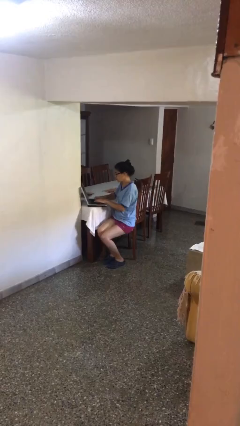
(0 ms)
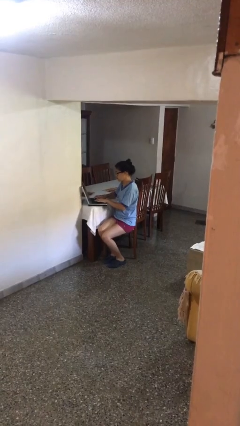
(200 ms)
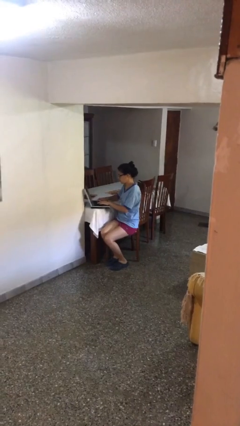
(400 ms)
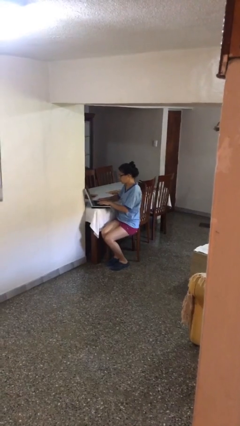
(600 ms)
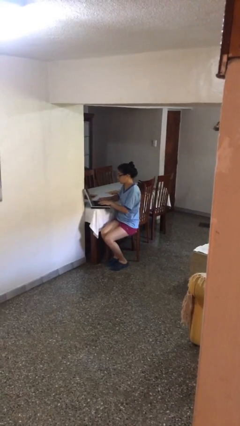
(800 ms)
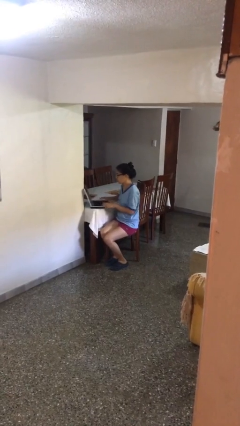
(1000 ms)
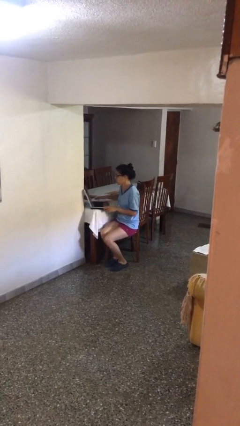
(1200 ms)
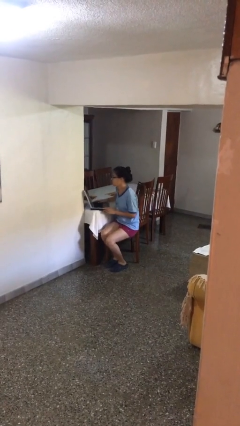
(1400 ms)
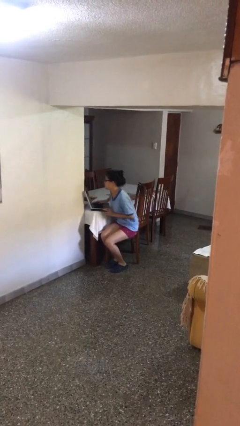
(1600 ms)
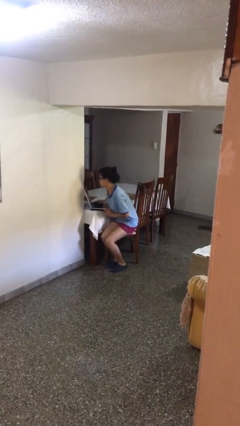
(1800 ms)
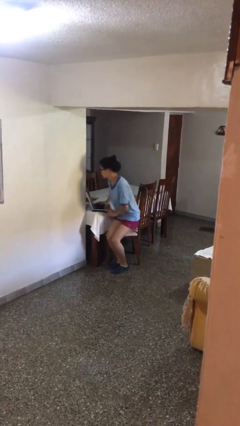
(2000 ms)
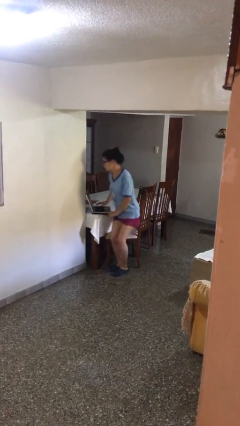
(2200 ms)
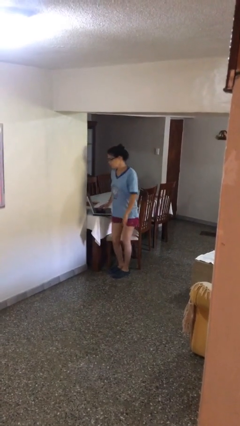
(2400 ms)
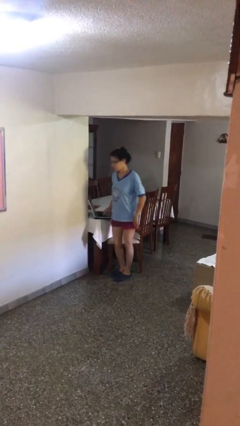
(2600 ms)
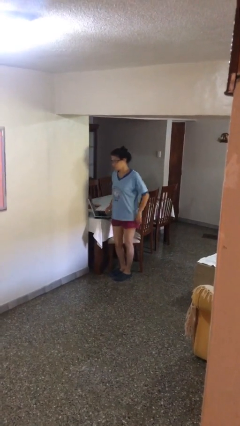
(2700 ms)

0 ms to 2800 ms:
person stands up

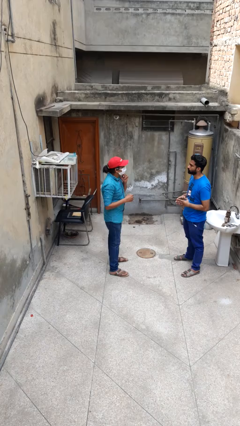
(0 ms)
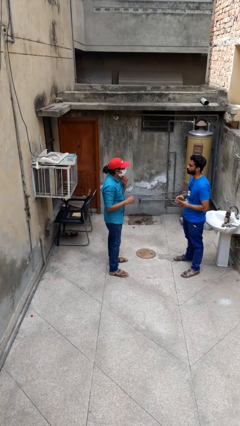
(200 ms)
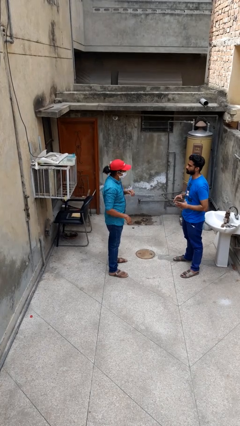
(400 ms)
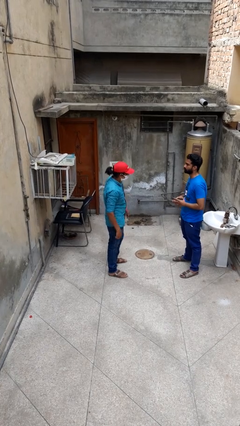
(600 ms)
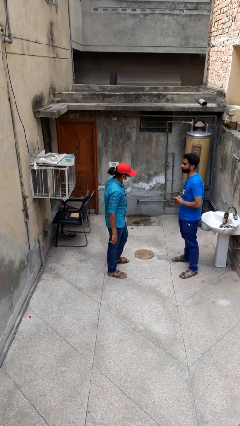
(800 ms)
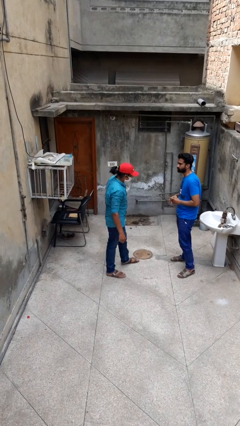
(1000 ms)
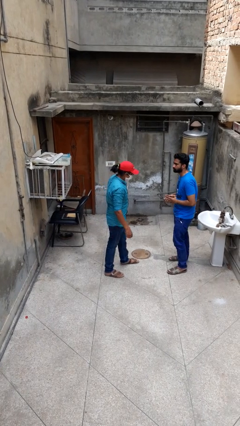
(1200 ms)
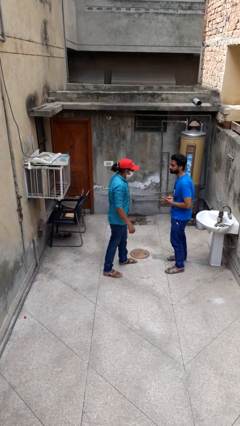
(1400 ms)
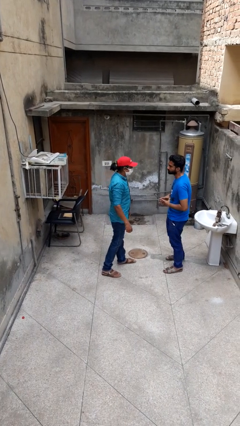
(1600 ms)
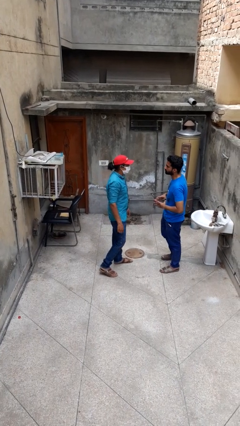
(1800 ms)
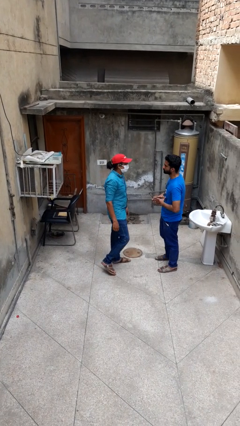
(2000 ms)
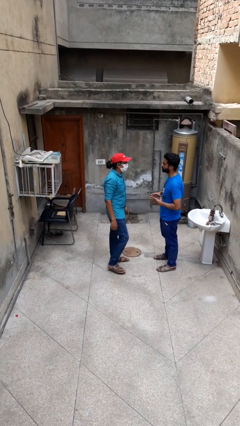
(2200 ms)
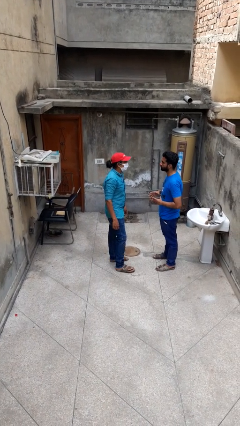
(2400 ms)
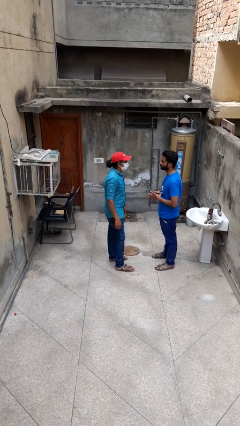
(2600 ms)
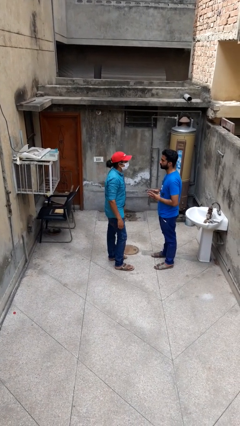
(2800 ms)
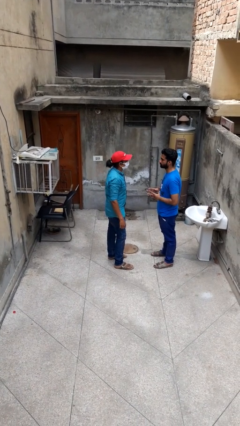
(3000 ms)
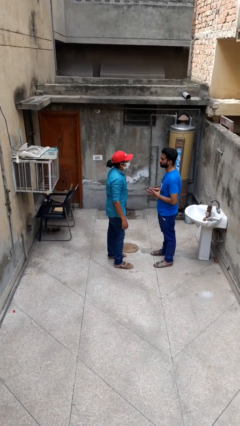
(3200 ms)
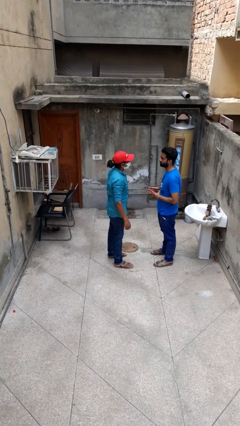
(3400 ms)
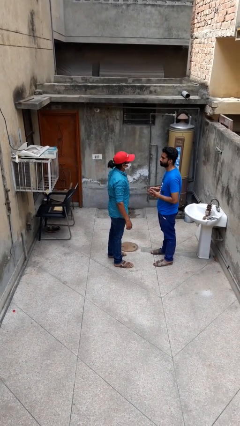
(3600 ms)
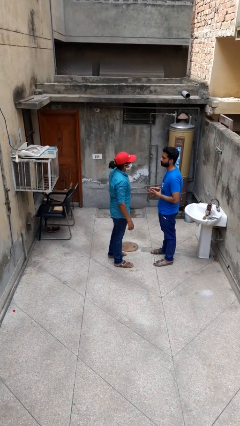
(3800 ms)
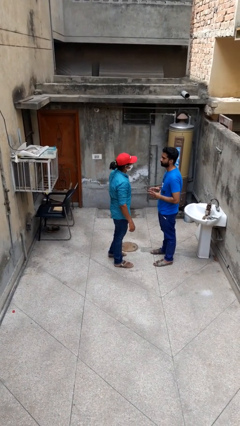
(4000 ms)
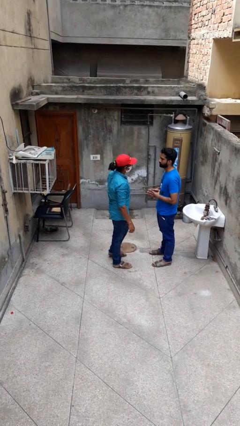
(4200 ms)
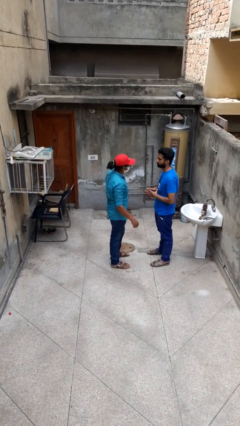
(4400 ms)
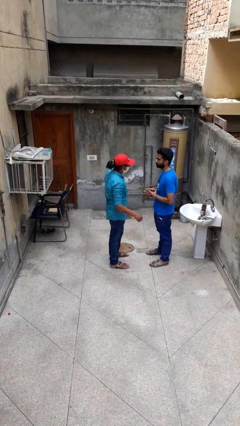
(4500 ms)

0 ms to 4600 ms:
person highfives hand

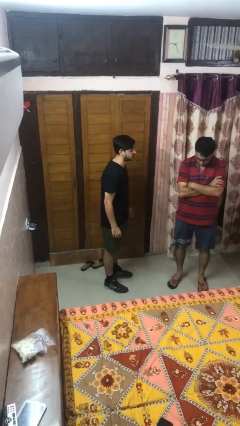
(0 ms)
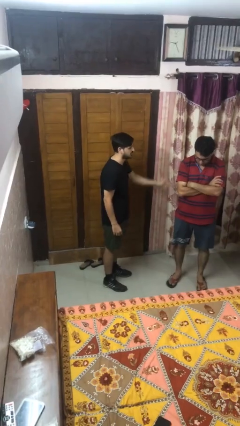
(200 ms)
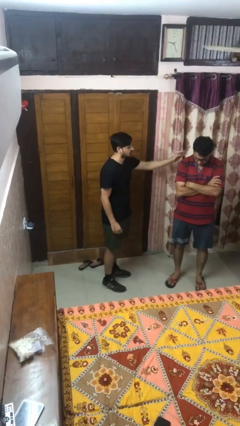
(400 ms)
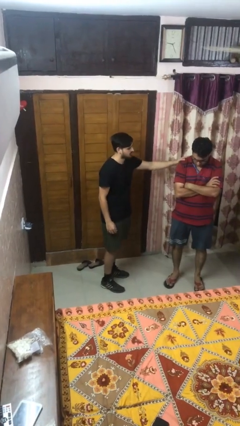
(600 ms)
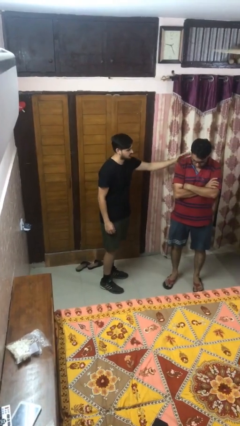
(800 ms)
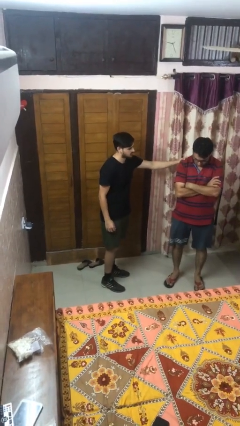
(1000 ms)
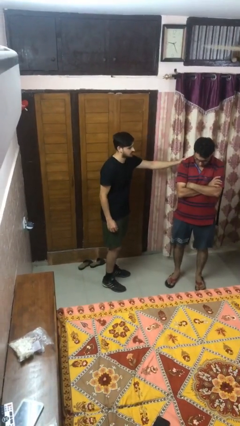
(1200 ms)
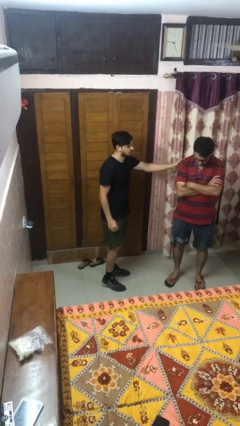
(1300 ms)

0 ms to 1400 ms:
person pounds shoulders of person

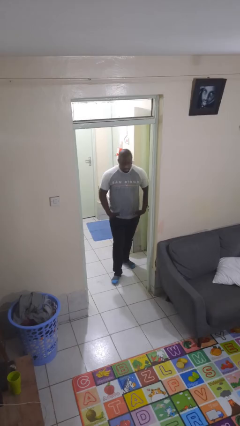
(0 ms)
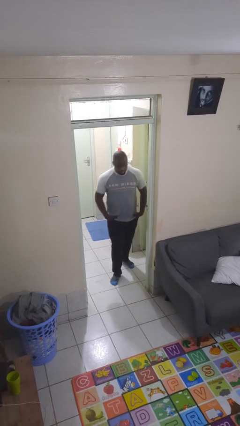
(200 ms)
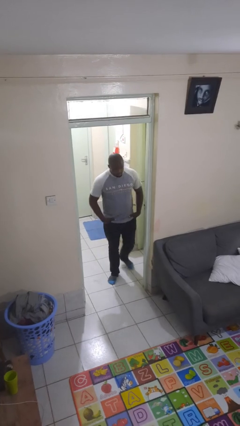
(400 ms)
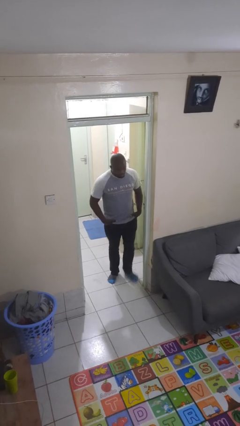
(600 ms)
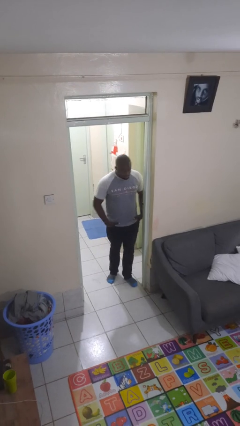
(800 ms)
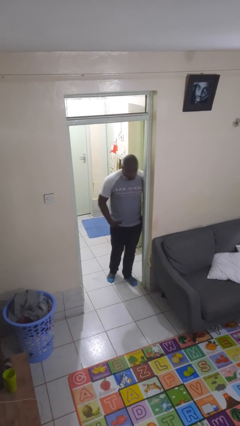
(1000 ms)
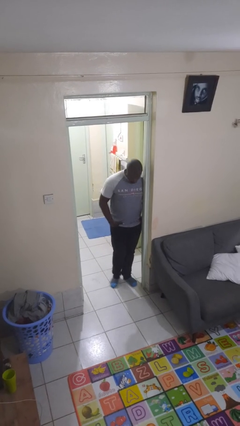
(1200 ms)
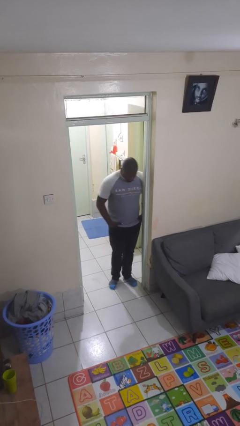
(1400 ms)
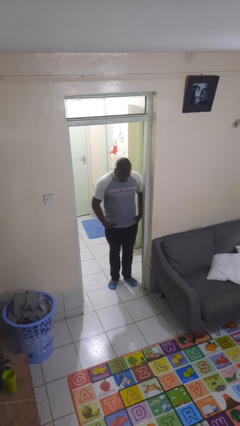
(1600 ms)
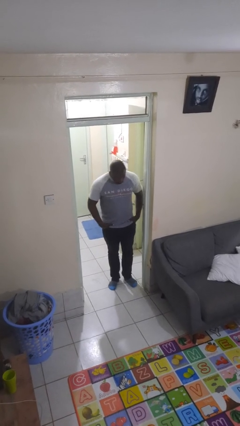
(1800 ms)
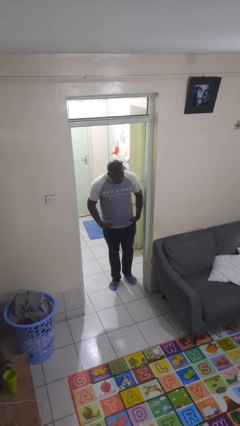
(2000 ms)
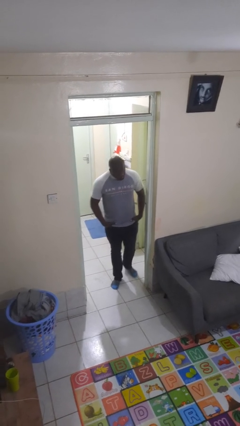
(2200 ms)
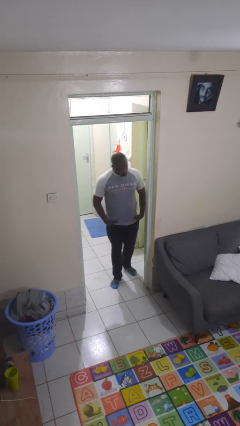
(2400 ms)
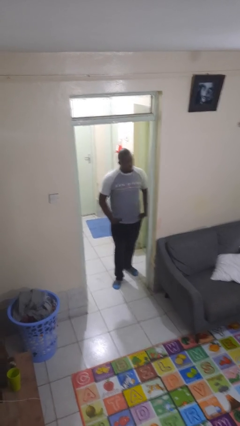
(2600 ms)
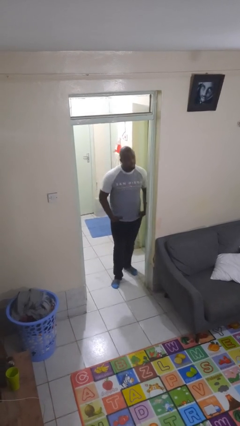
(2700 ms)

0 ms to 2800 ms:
person bumps into wall

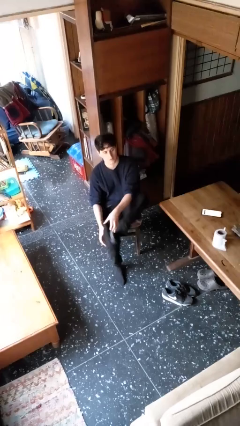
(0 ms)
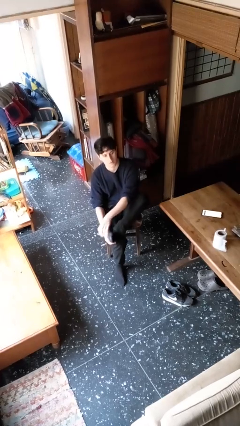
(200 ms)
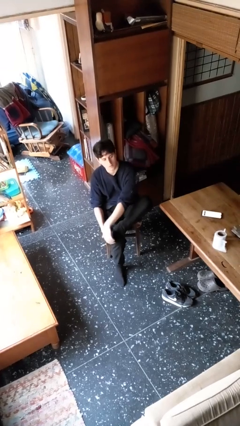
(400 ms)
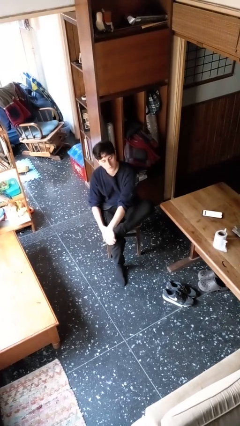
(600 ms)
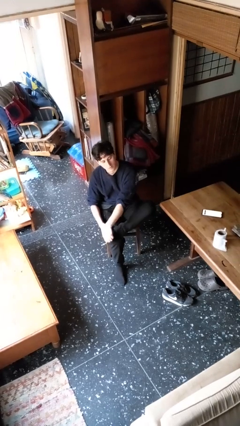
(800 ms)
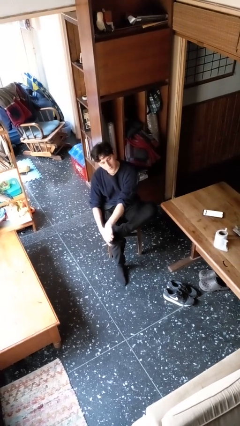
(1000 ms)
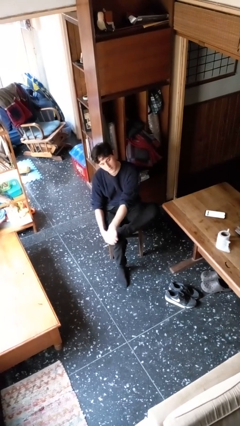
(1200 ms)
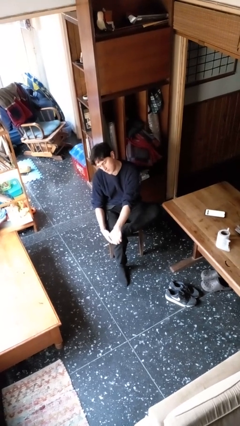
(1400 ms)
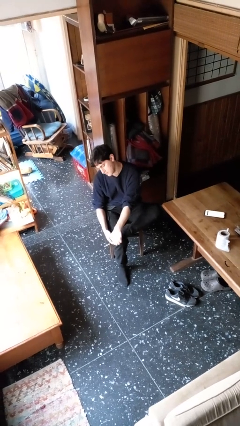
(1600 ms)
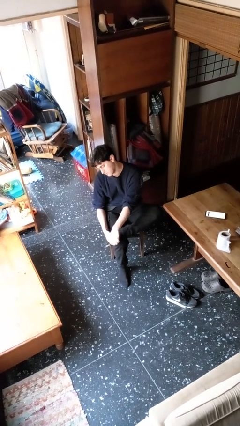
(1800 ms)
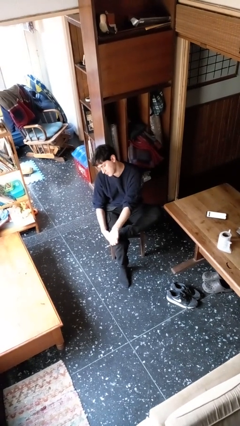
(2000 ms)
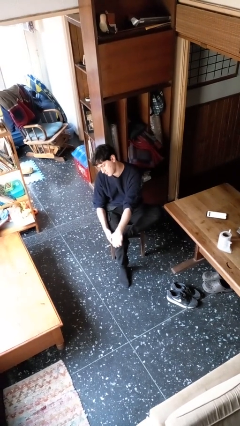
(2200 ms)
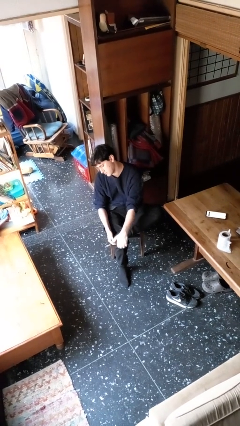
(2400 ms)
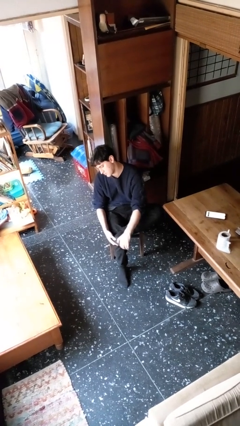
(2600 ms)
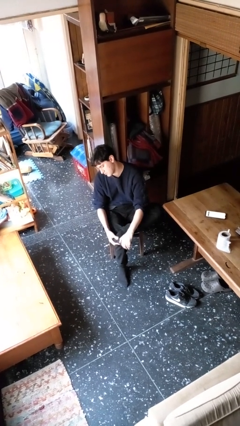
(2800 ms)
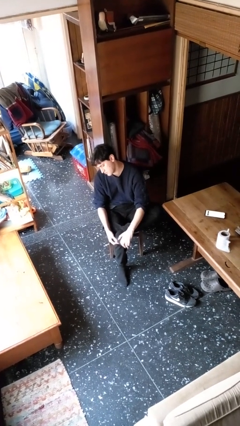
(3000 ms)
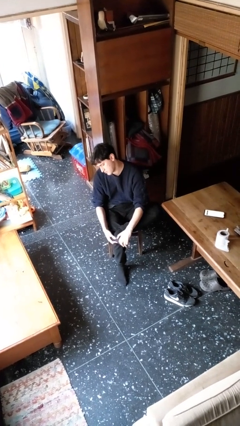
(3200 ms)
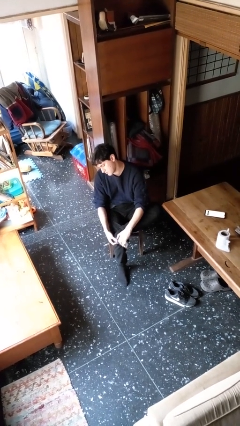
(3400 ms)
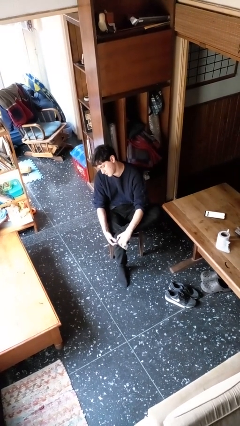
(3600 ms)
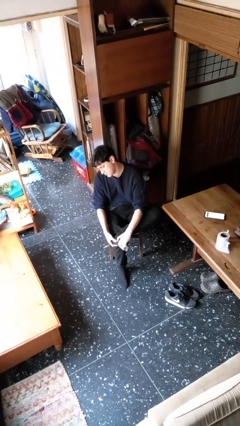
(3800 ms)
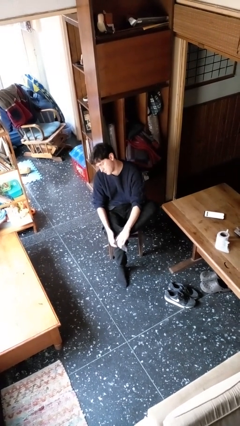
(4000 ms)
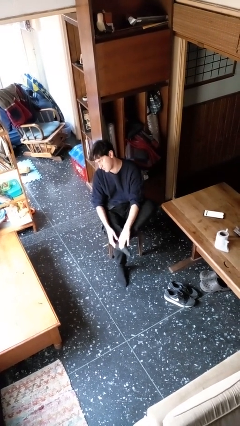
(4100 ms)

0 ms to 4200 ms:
person rubs foot

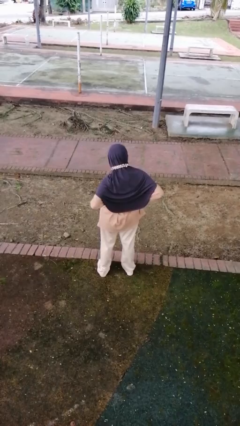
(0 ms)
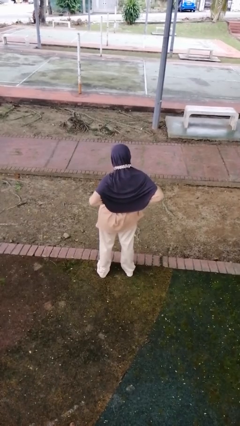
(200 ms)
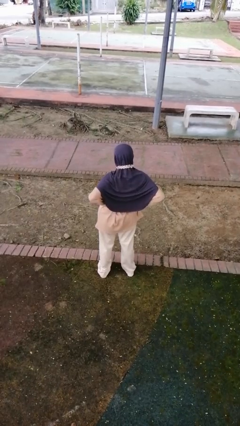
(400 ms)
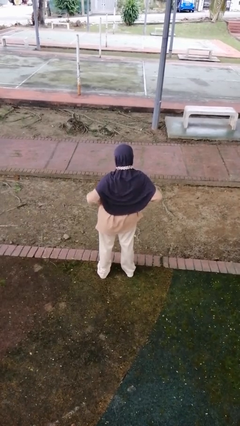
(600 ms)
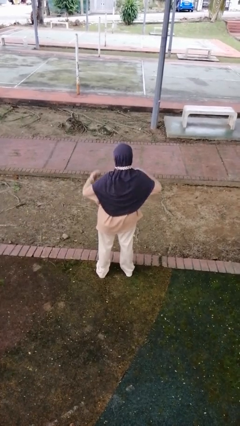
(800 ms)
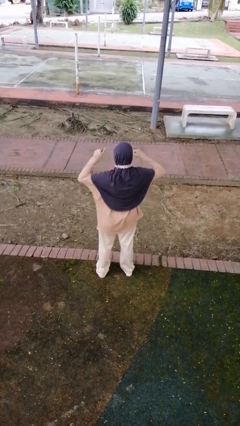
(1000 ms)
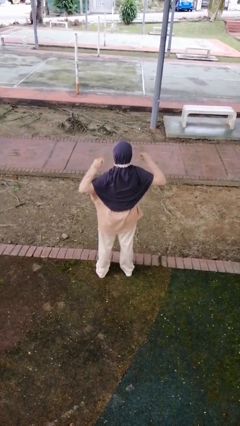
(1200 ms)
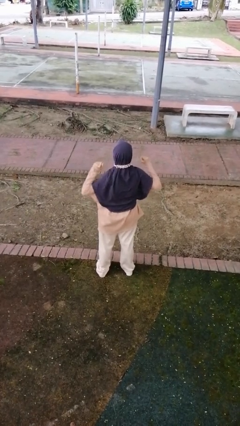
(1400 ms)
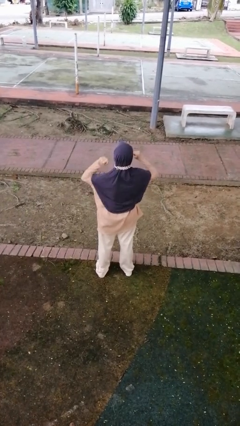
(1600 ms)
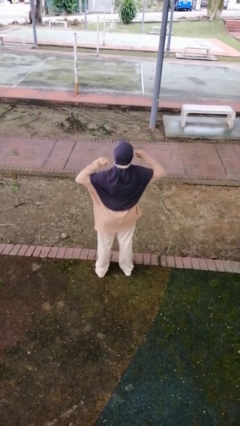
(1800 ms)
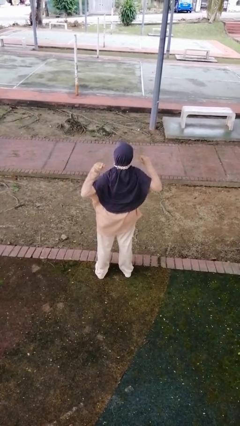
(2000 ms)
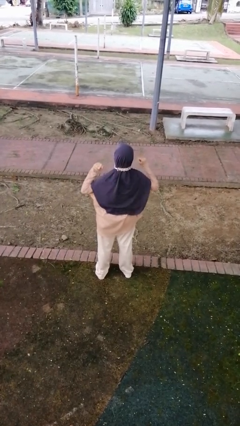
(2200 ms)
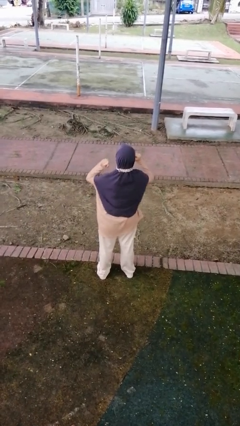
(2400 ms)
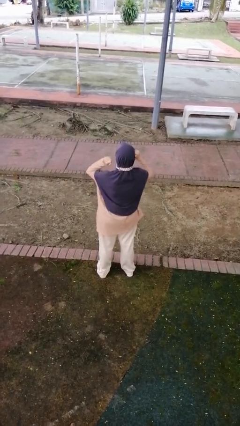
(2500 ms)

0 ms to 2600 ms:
person stretches arms to side
